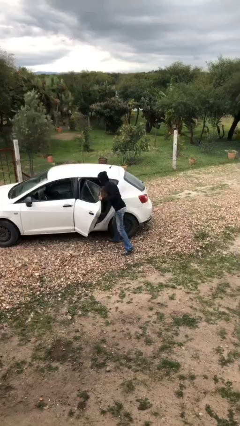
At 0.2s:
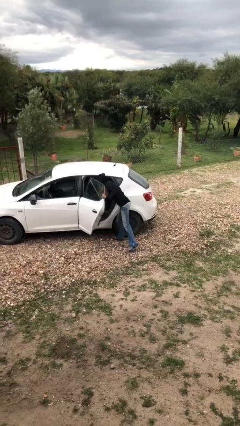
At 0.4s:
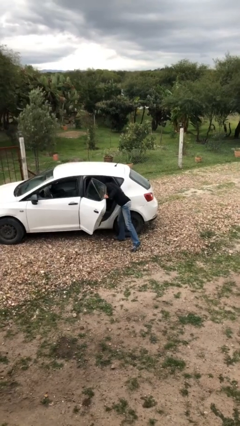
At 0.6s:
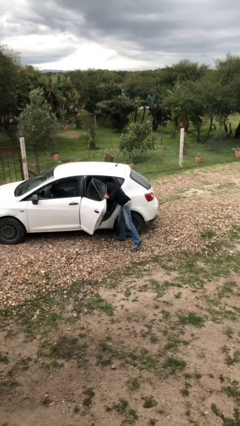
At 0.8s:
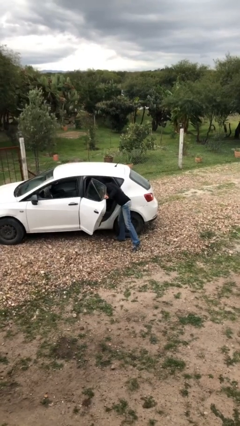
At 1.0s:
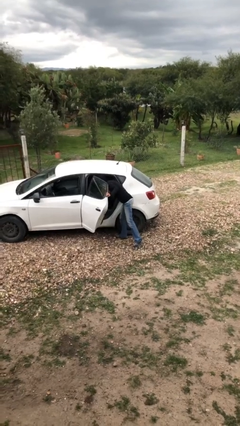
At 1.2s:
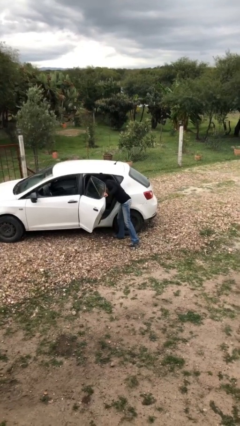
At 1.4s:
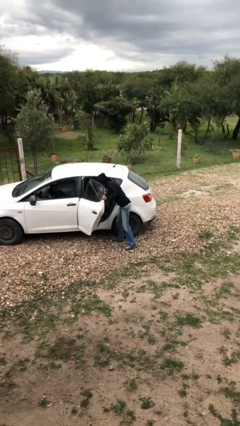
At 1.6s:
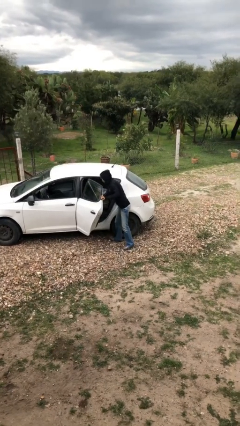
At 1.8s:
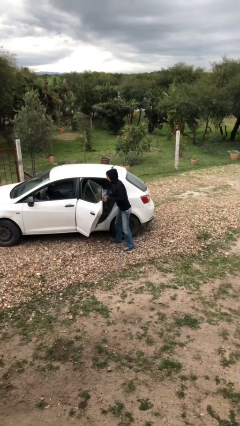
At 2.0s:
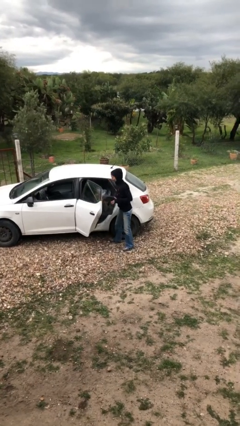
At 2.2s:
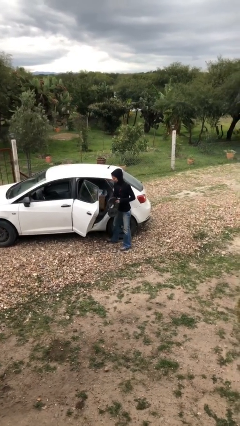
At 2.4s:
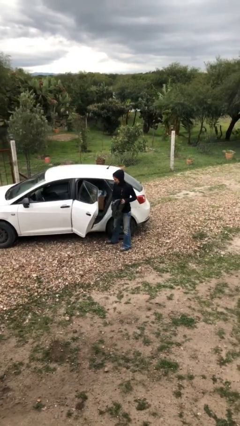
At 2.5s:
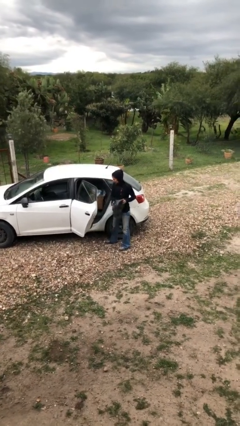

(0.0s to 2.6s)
person unloads car

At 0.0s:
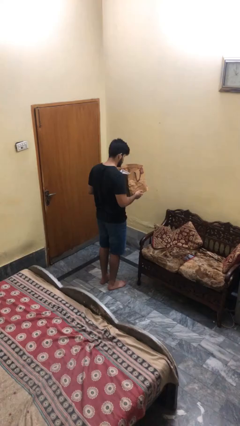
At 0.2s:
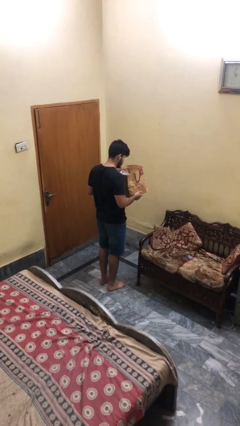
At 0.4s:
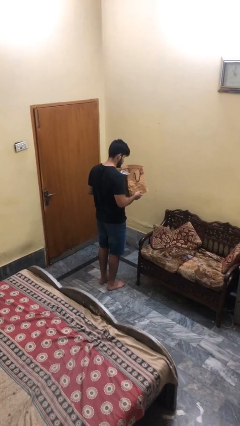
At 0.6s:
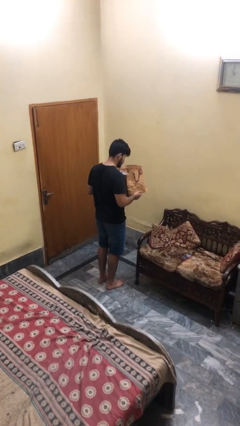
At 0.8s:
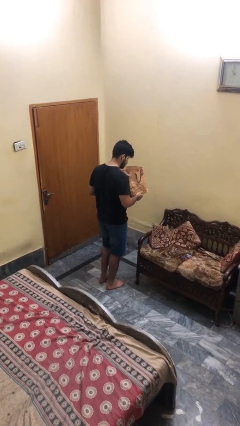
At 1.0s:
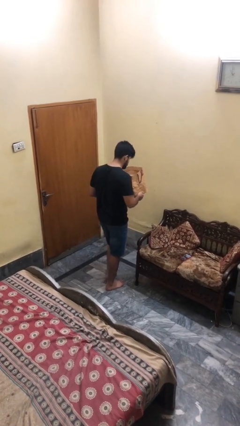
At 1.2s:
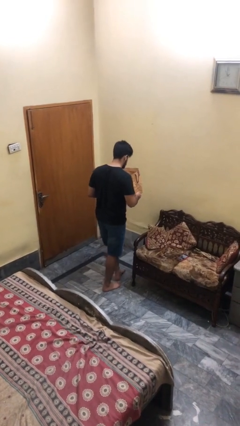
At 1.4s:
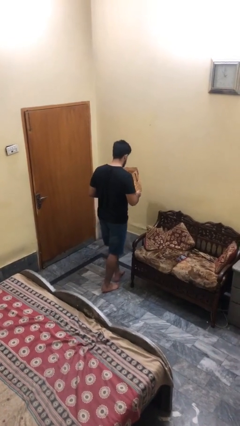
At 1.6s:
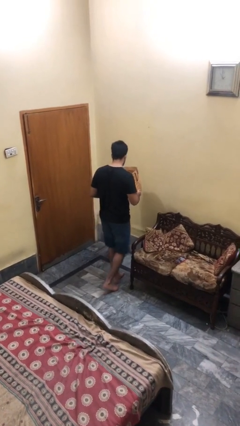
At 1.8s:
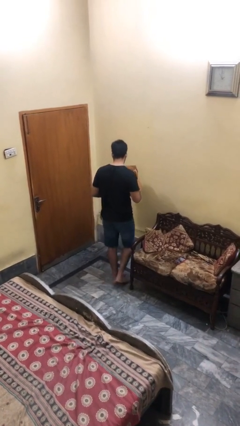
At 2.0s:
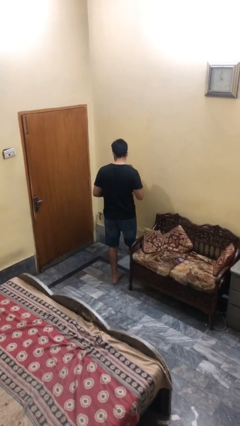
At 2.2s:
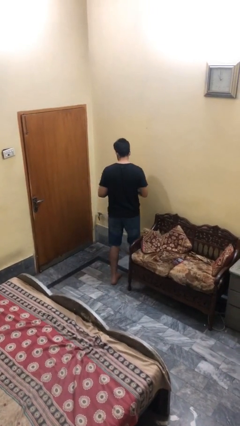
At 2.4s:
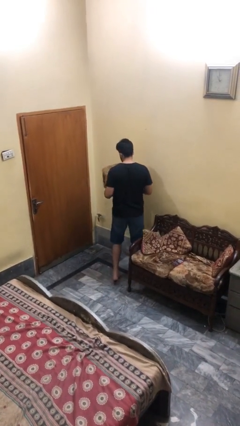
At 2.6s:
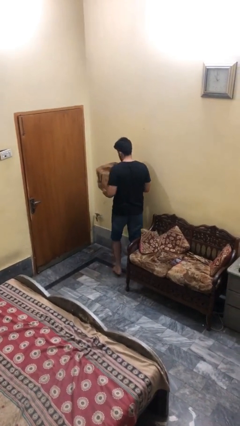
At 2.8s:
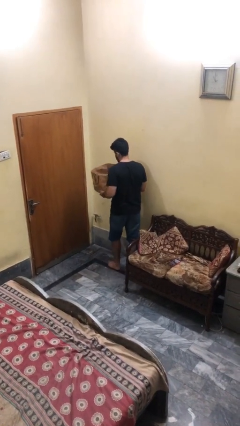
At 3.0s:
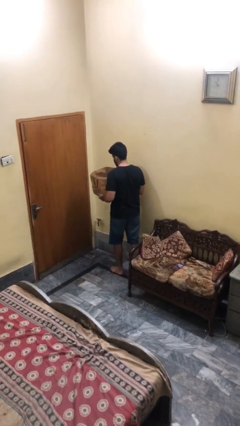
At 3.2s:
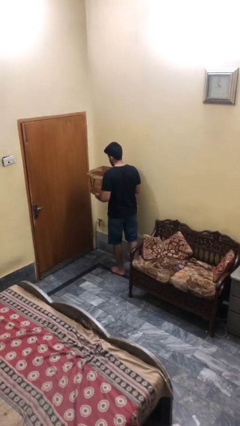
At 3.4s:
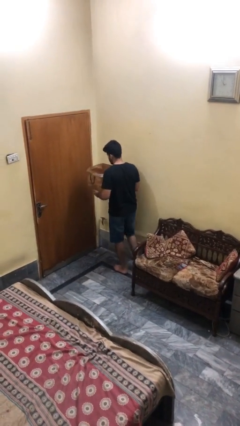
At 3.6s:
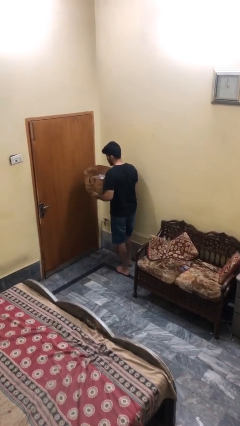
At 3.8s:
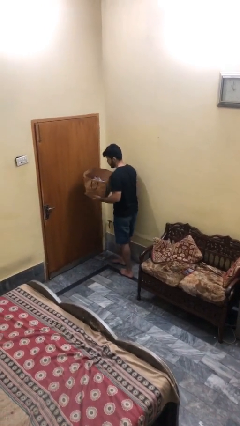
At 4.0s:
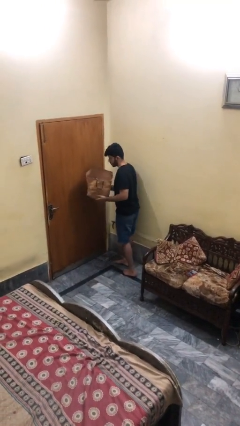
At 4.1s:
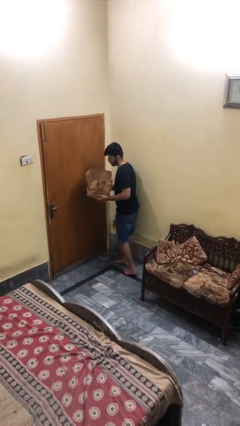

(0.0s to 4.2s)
person carries groceries

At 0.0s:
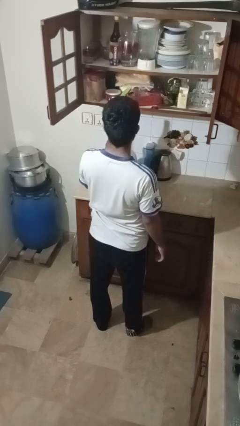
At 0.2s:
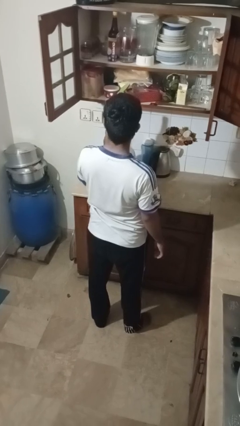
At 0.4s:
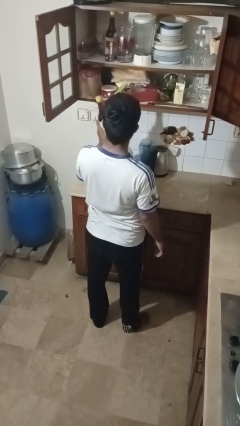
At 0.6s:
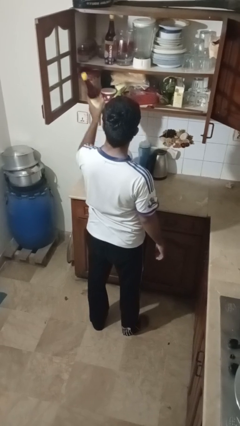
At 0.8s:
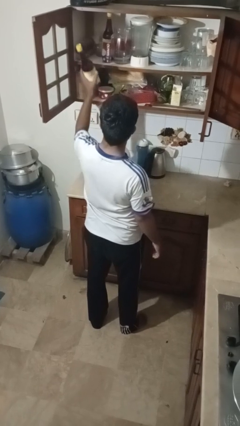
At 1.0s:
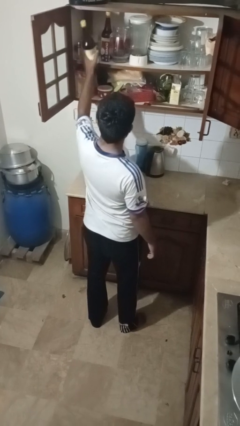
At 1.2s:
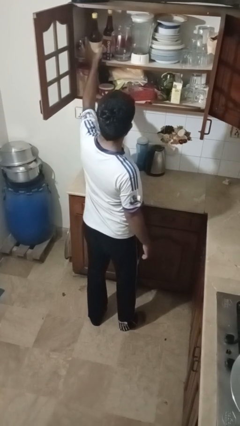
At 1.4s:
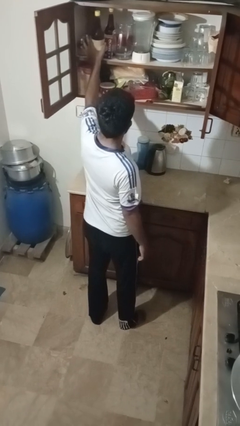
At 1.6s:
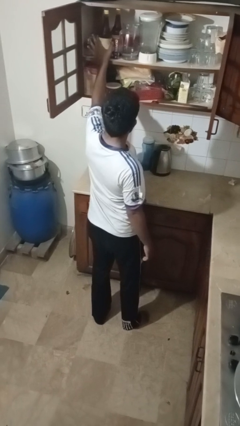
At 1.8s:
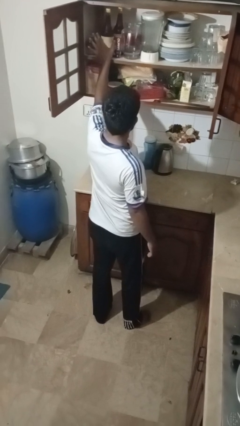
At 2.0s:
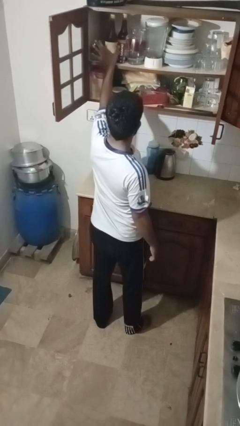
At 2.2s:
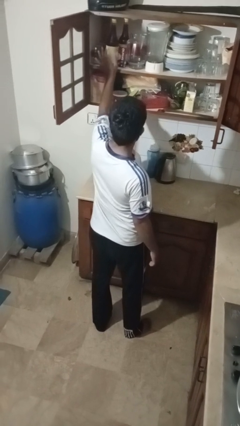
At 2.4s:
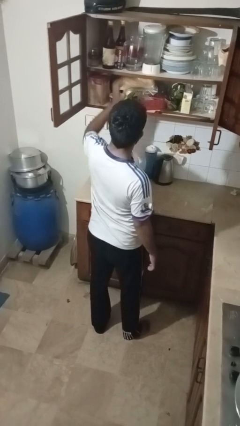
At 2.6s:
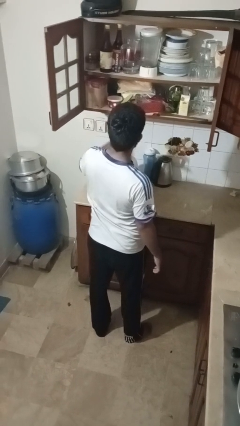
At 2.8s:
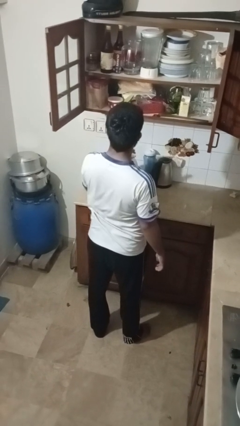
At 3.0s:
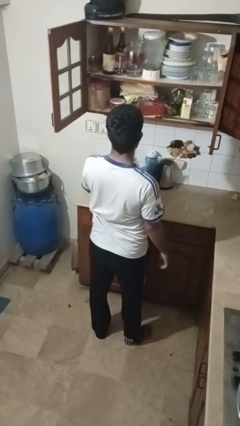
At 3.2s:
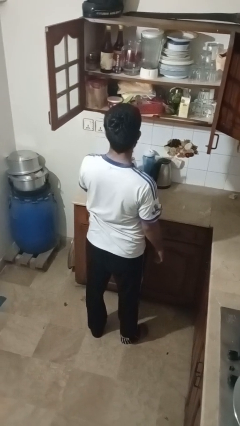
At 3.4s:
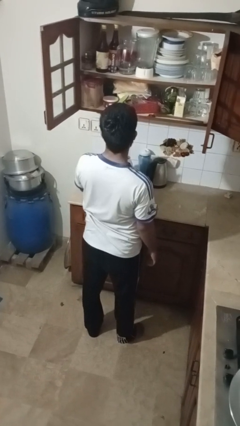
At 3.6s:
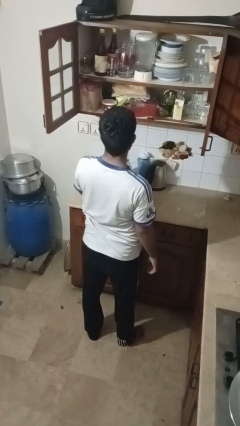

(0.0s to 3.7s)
person puts object in cabinet

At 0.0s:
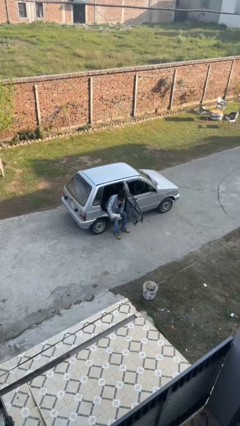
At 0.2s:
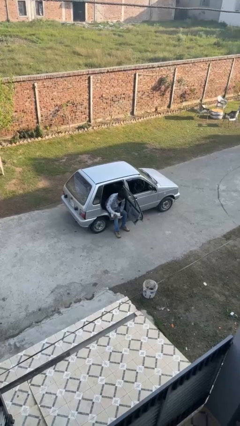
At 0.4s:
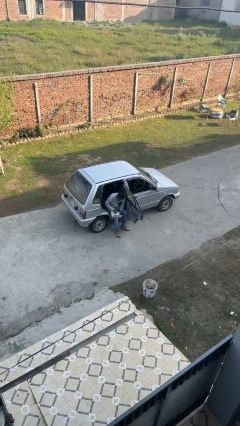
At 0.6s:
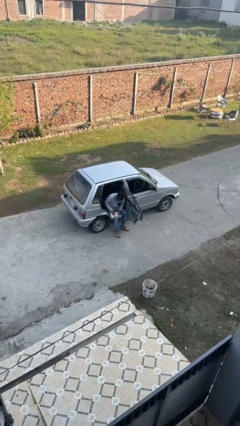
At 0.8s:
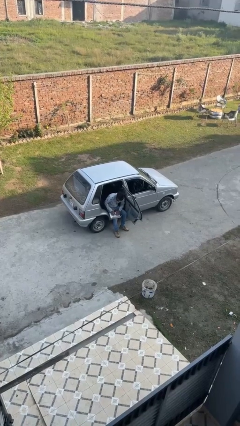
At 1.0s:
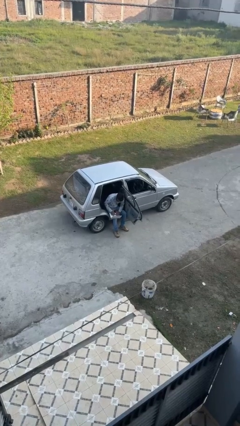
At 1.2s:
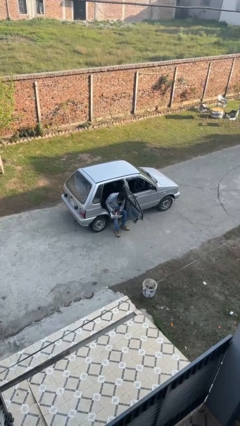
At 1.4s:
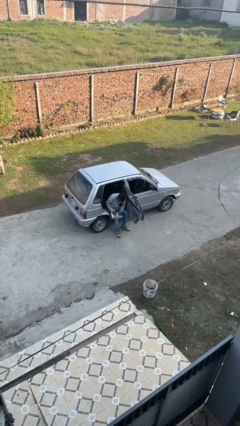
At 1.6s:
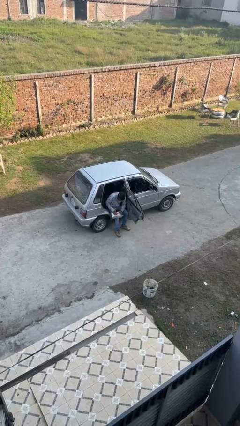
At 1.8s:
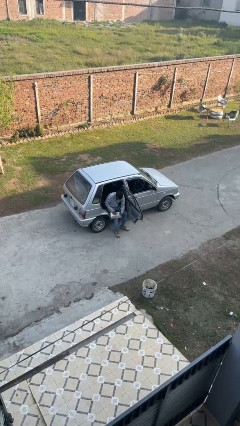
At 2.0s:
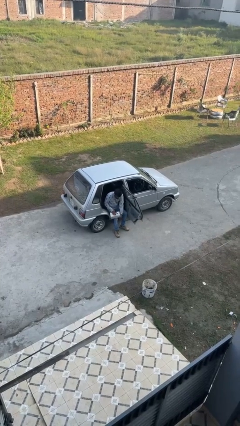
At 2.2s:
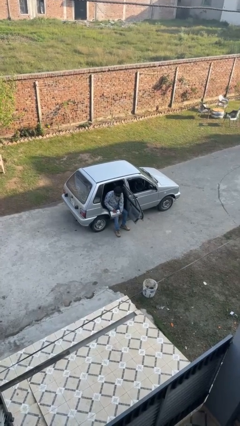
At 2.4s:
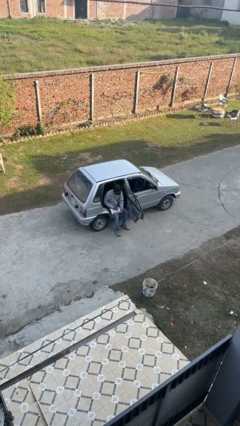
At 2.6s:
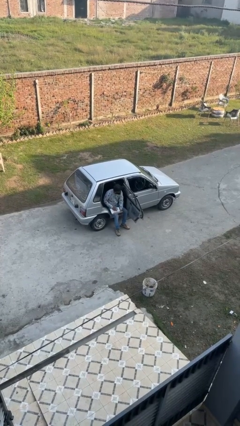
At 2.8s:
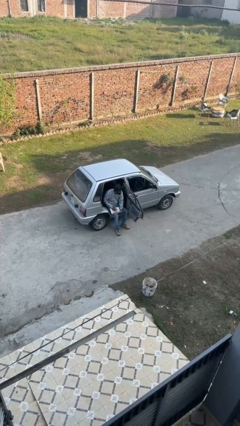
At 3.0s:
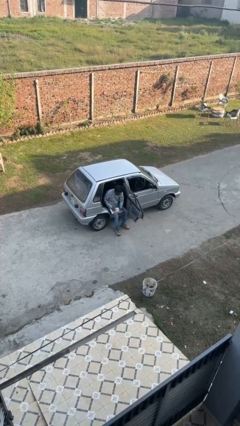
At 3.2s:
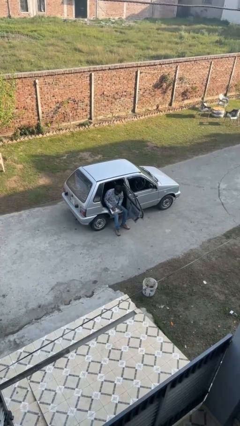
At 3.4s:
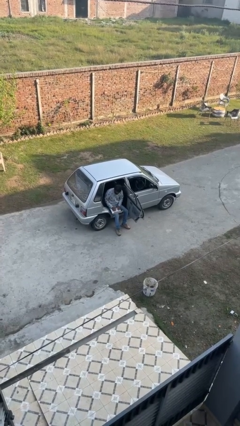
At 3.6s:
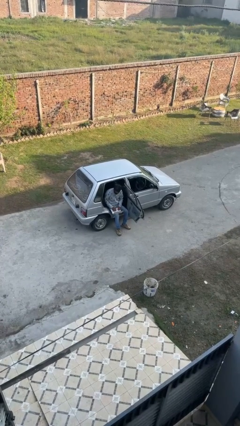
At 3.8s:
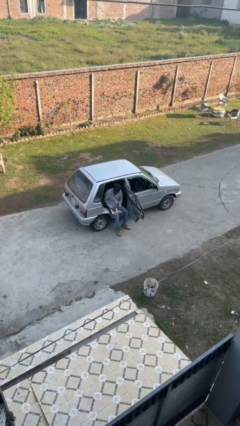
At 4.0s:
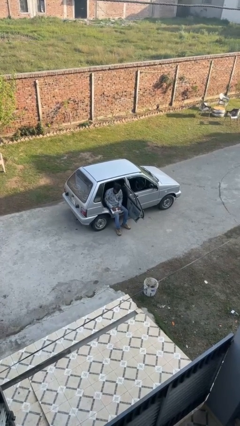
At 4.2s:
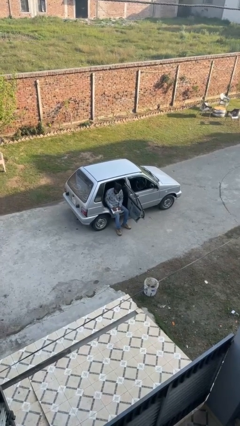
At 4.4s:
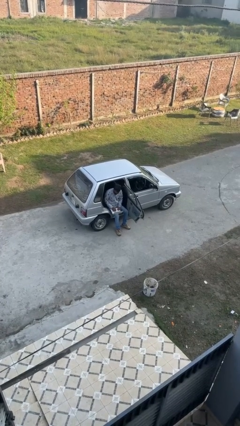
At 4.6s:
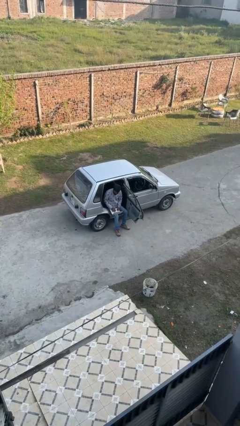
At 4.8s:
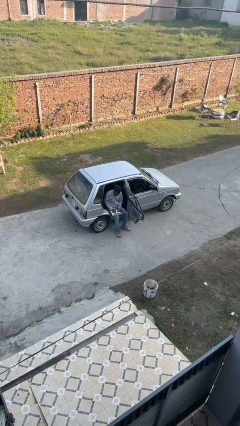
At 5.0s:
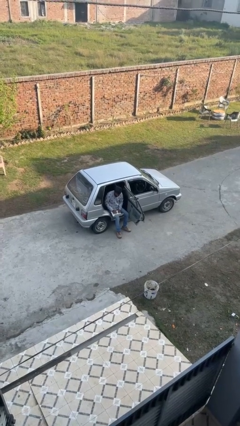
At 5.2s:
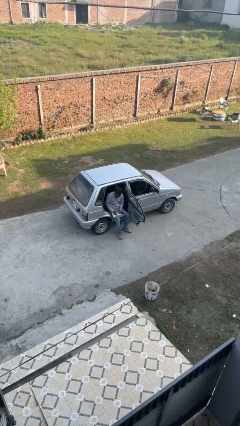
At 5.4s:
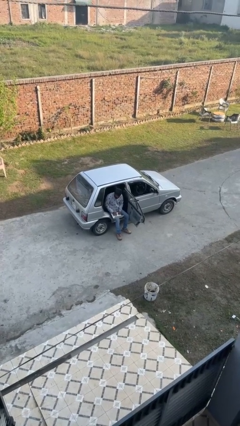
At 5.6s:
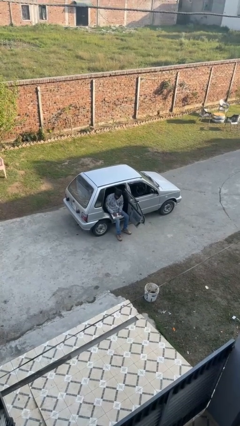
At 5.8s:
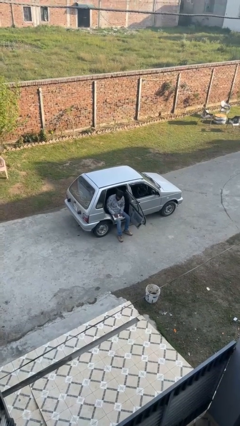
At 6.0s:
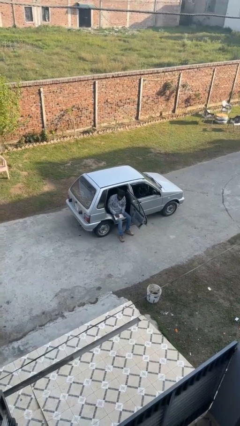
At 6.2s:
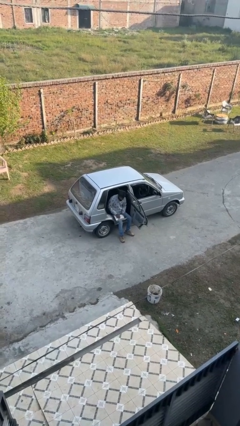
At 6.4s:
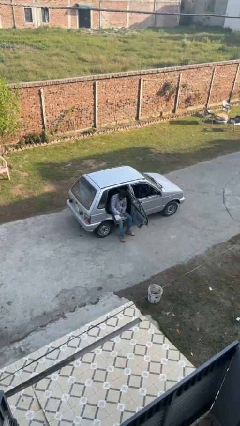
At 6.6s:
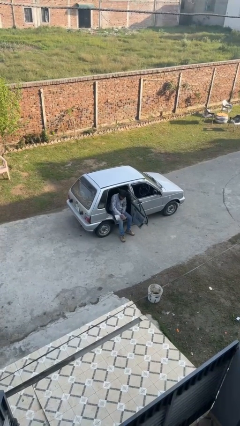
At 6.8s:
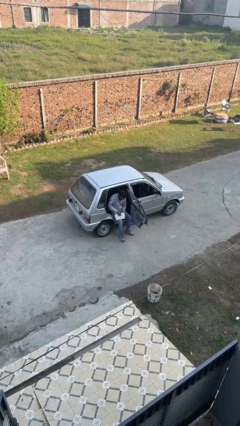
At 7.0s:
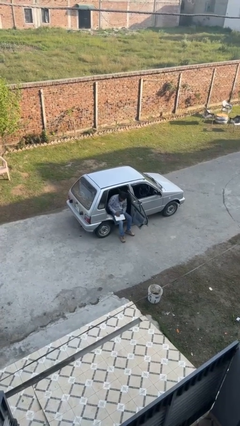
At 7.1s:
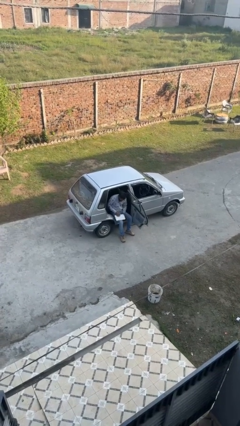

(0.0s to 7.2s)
person interacts with laptop

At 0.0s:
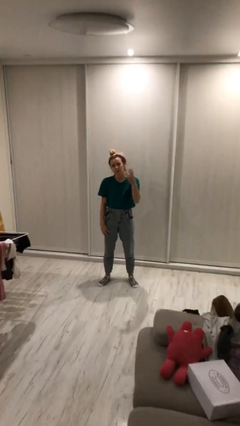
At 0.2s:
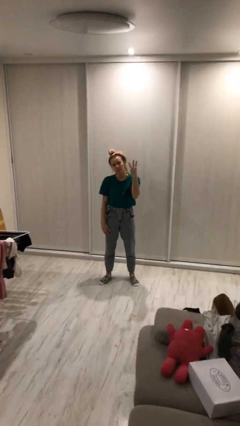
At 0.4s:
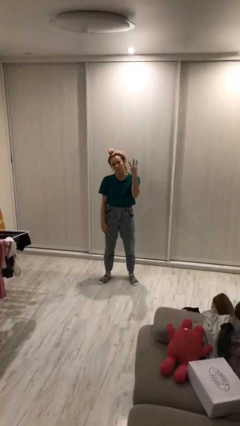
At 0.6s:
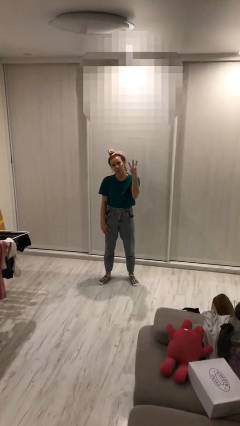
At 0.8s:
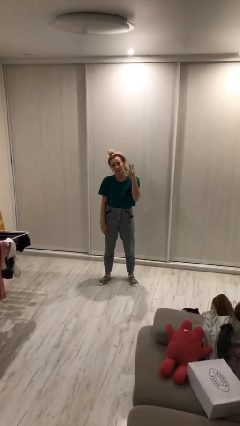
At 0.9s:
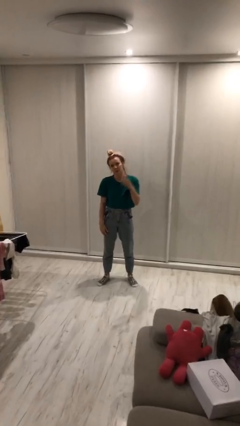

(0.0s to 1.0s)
person gestures number three
